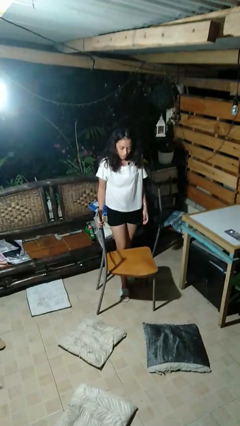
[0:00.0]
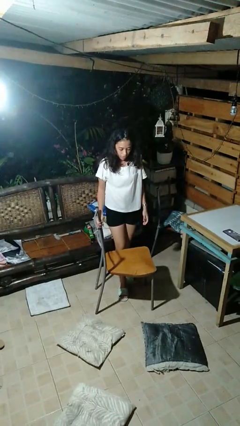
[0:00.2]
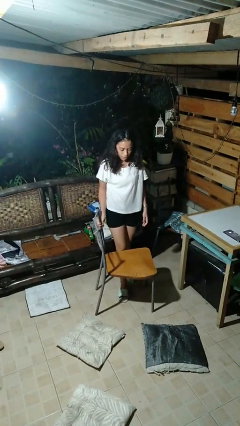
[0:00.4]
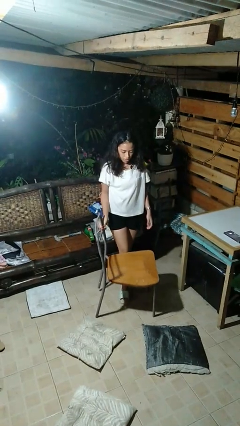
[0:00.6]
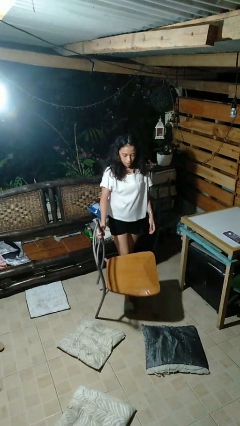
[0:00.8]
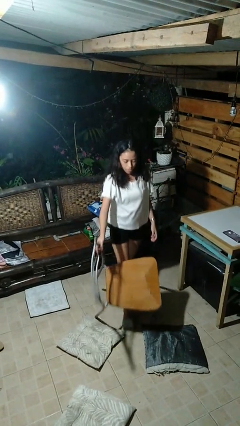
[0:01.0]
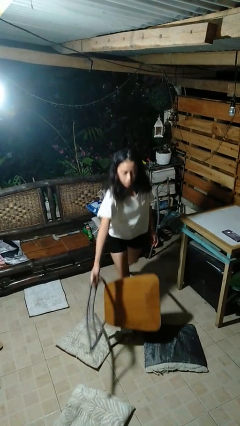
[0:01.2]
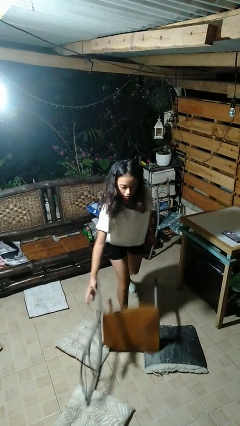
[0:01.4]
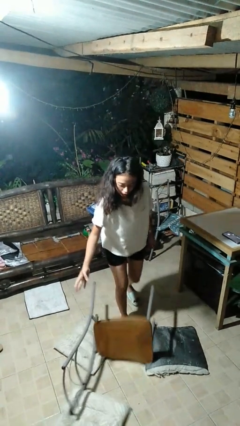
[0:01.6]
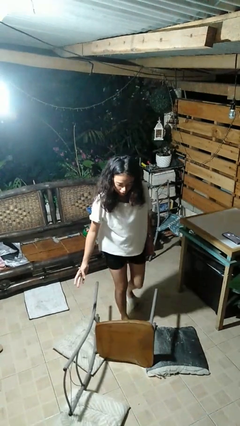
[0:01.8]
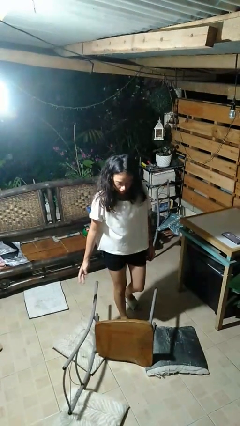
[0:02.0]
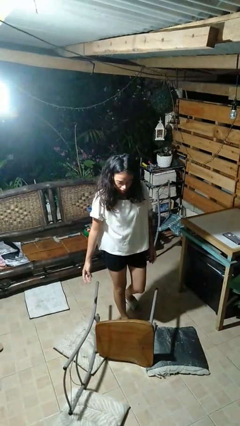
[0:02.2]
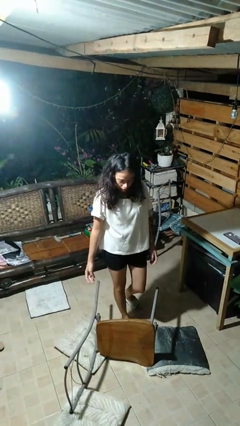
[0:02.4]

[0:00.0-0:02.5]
person knocks over furniture

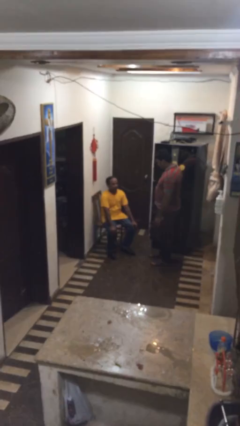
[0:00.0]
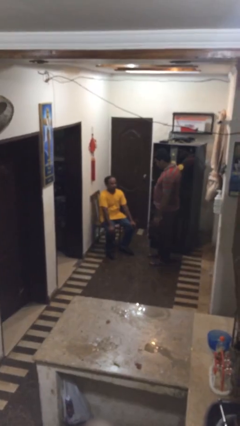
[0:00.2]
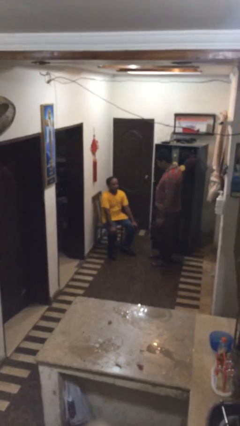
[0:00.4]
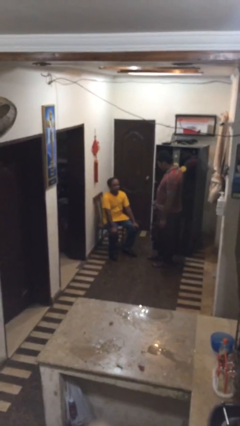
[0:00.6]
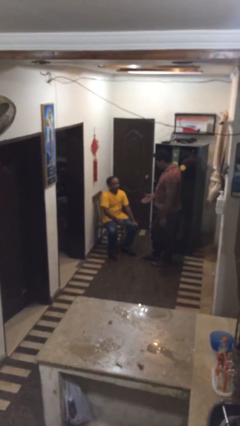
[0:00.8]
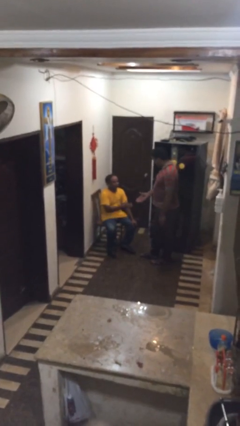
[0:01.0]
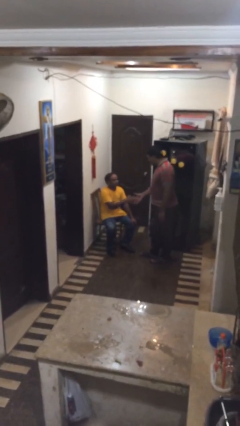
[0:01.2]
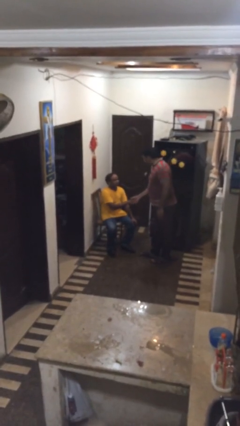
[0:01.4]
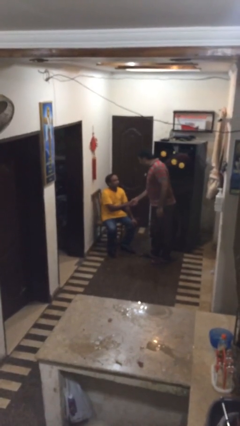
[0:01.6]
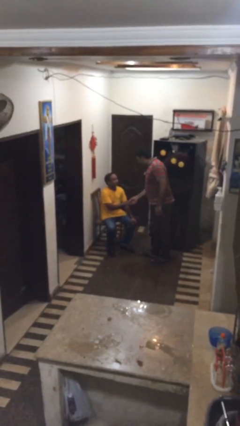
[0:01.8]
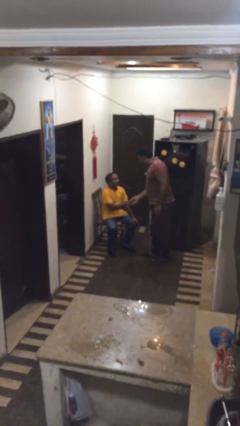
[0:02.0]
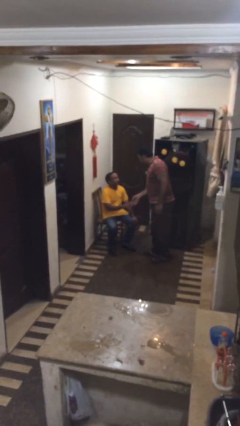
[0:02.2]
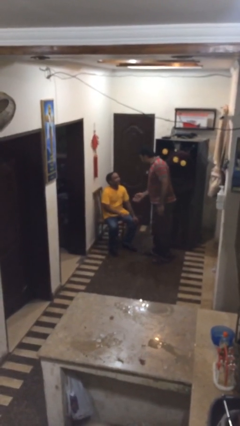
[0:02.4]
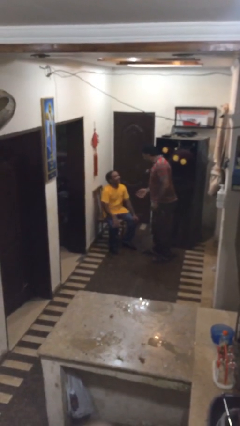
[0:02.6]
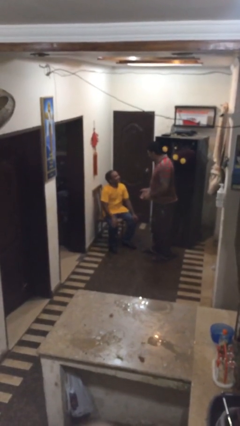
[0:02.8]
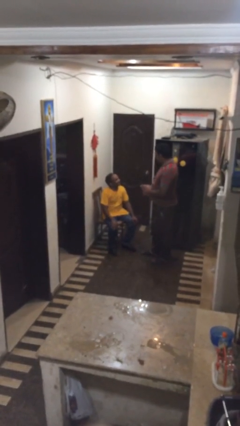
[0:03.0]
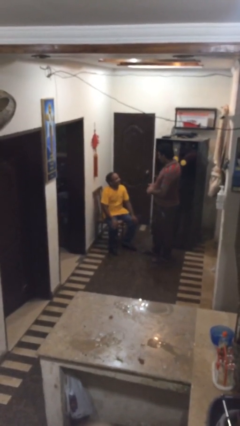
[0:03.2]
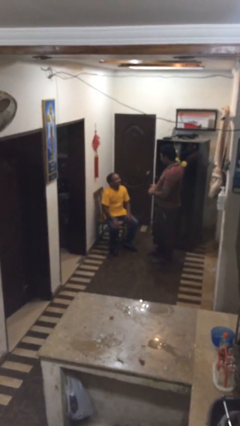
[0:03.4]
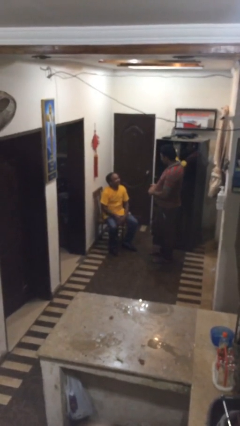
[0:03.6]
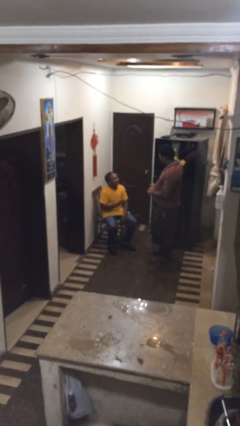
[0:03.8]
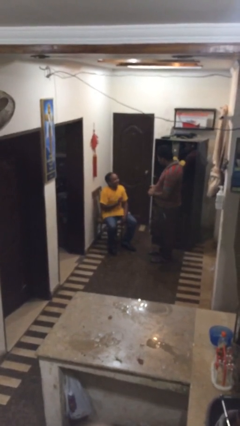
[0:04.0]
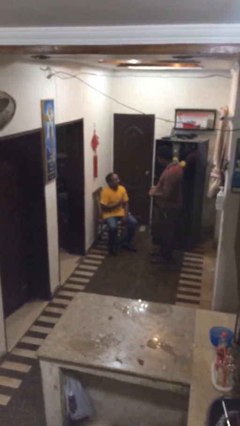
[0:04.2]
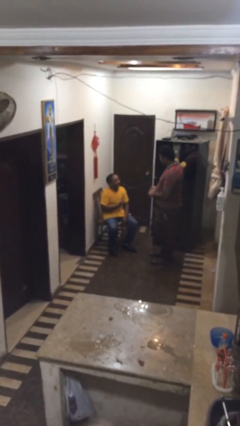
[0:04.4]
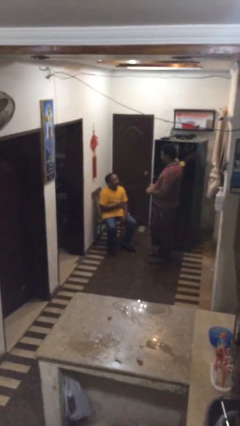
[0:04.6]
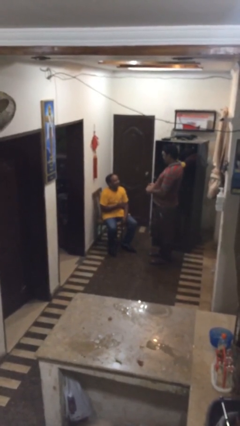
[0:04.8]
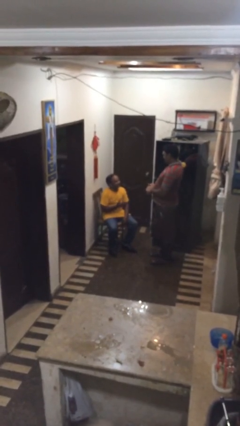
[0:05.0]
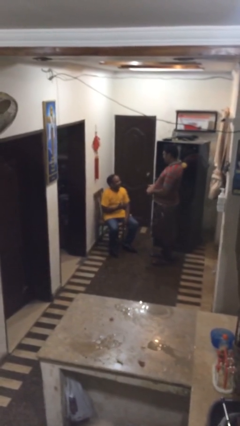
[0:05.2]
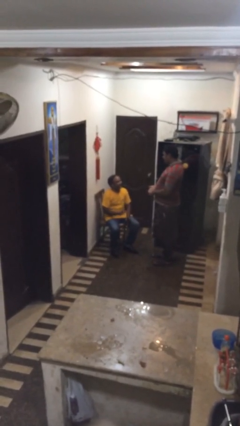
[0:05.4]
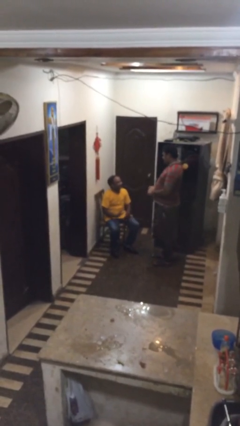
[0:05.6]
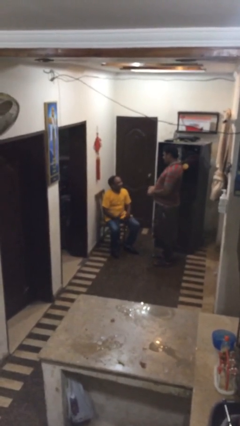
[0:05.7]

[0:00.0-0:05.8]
person shakes hand

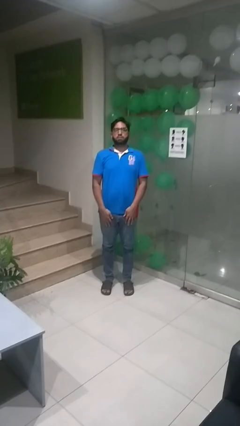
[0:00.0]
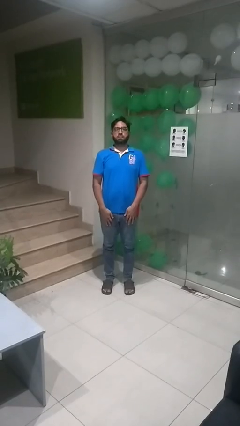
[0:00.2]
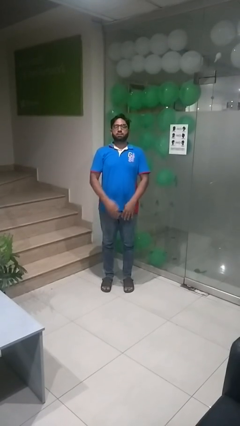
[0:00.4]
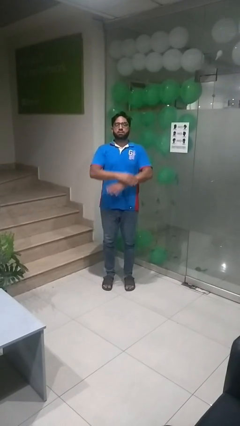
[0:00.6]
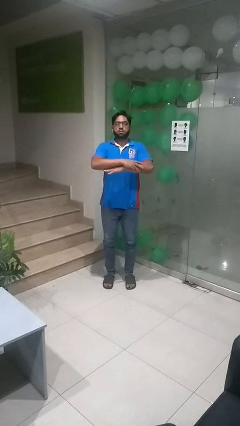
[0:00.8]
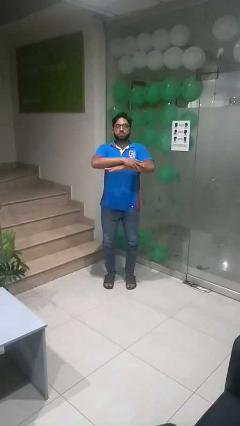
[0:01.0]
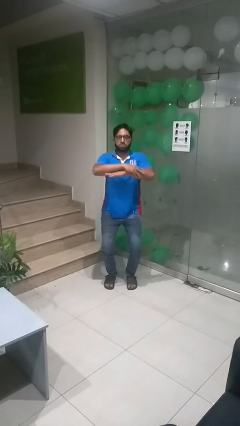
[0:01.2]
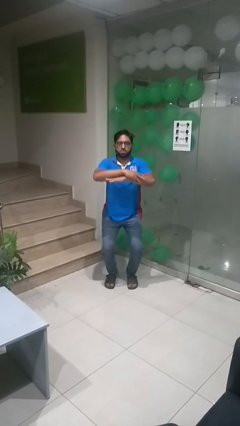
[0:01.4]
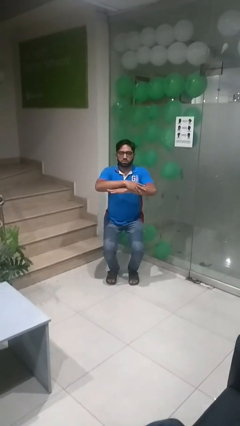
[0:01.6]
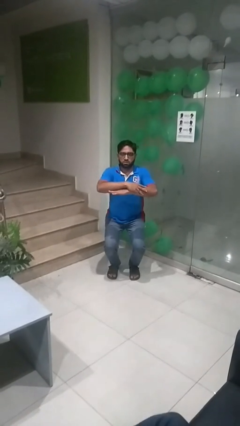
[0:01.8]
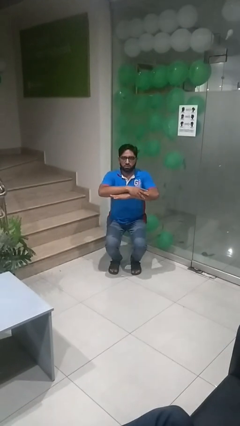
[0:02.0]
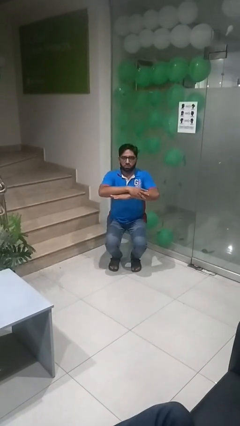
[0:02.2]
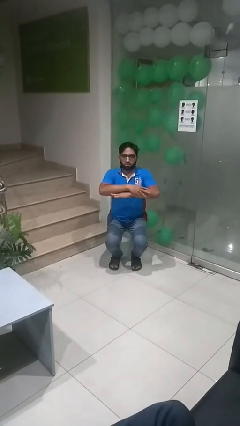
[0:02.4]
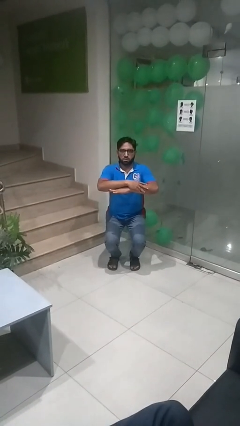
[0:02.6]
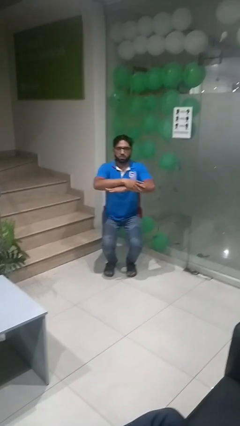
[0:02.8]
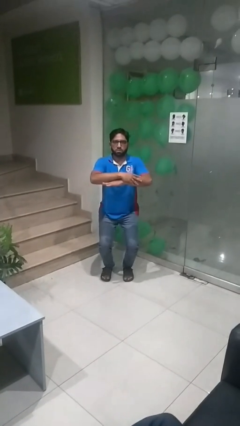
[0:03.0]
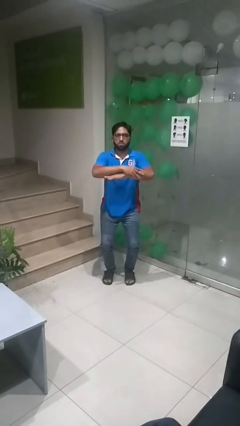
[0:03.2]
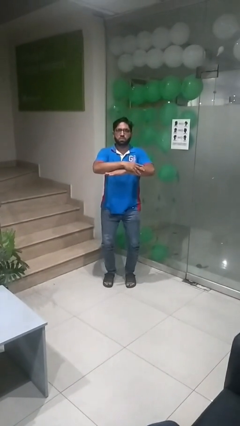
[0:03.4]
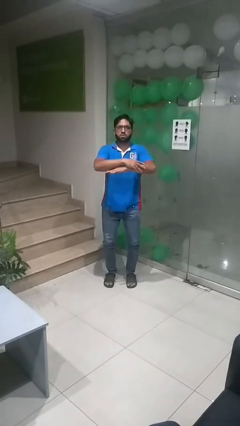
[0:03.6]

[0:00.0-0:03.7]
person squats

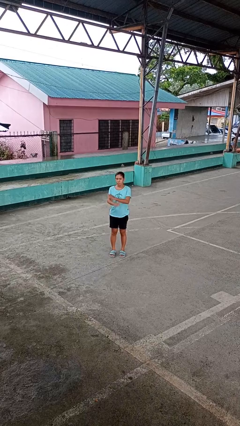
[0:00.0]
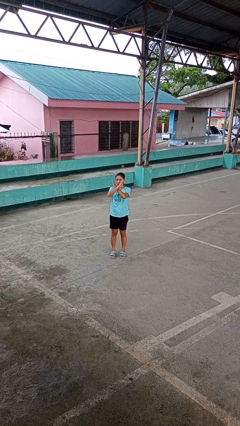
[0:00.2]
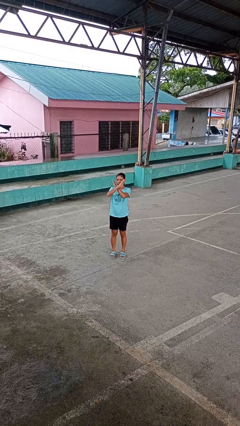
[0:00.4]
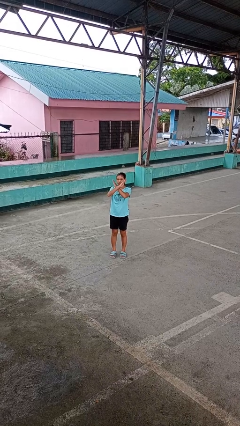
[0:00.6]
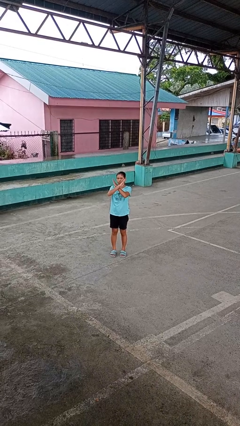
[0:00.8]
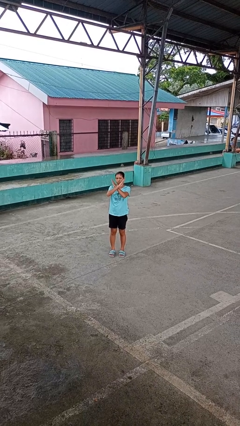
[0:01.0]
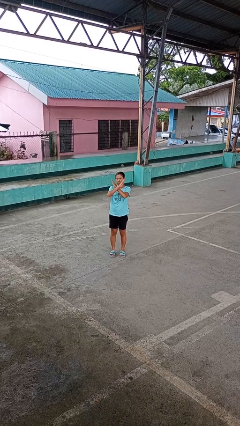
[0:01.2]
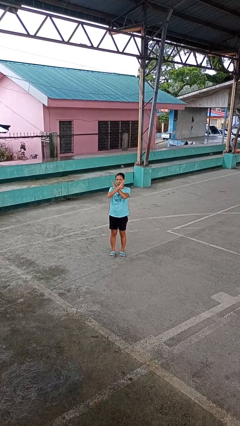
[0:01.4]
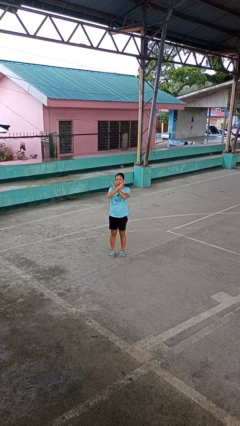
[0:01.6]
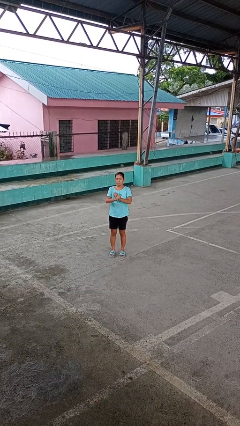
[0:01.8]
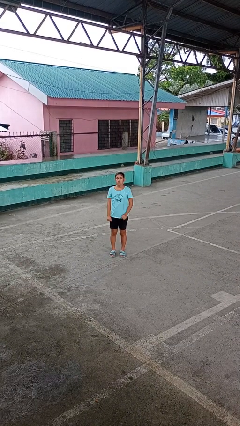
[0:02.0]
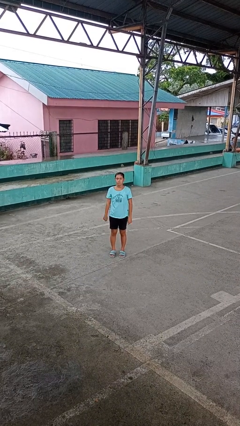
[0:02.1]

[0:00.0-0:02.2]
person gestures arms x

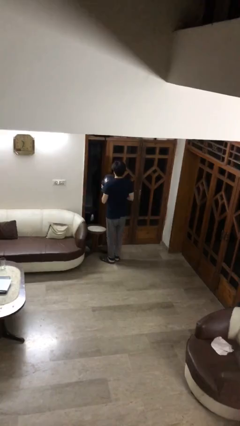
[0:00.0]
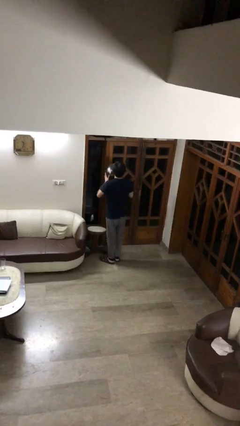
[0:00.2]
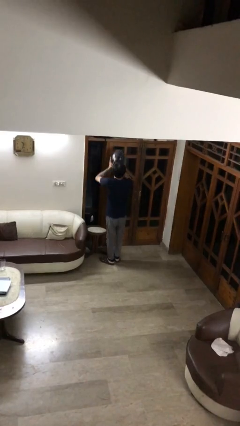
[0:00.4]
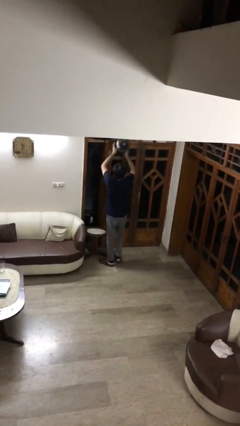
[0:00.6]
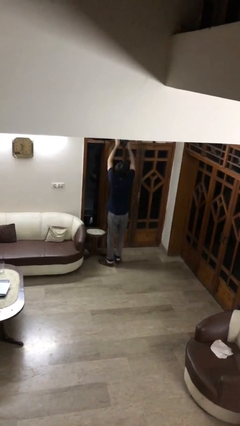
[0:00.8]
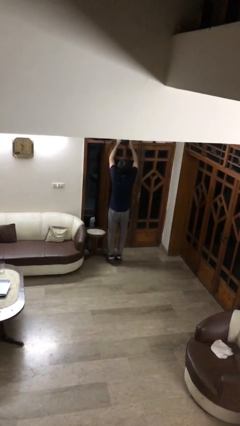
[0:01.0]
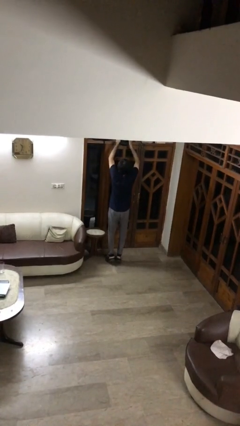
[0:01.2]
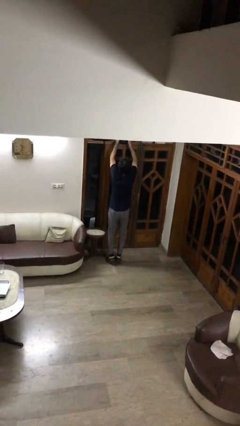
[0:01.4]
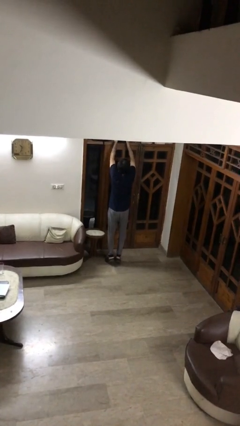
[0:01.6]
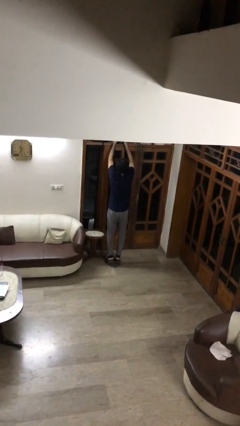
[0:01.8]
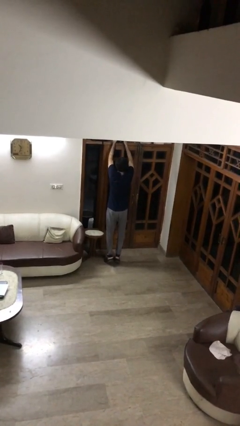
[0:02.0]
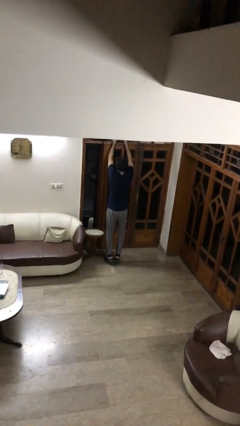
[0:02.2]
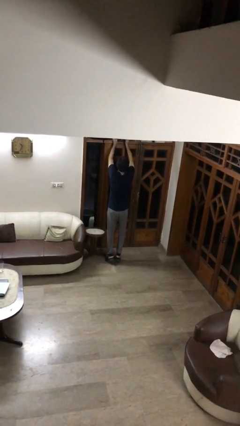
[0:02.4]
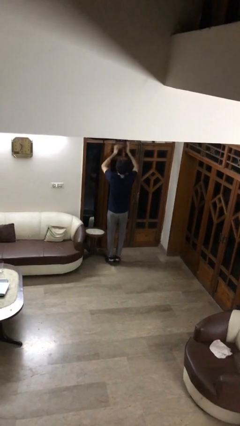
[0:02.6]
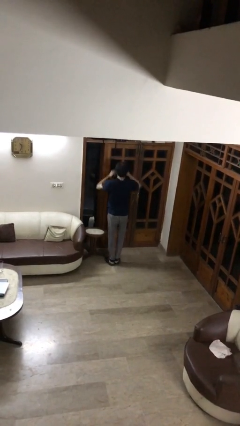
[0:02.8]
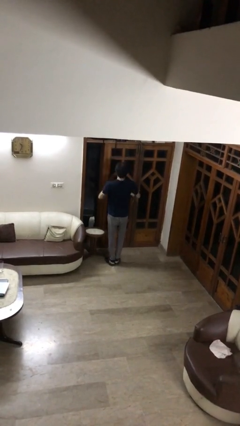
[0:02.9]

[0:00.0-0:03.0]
person puts down object on shelf

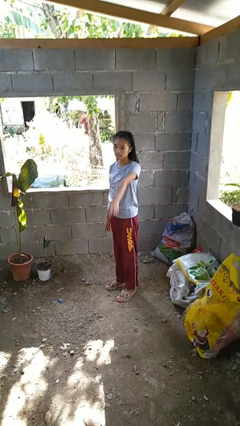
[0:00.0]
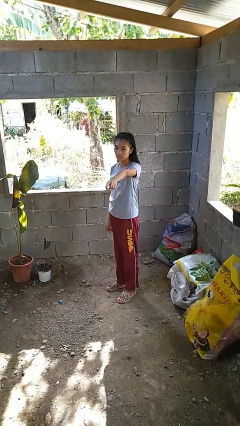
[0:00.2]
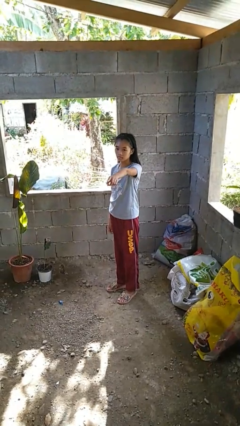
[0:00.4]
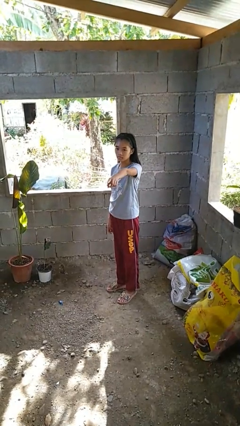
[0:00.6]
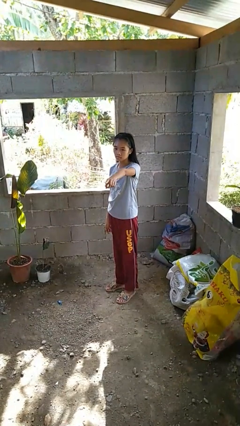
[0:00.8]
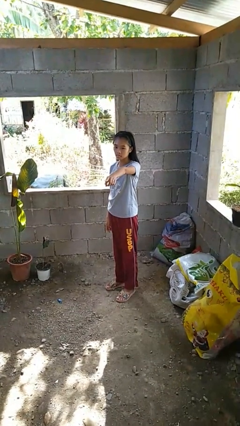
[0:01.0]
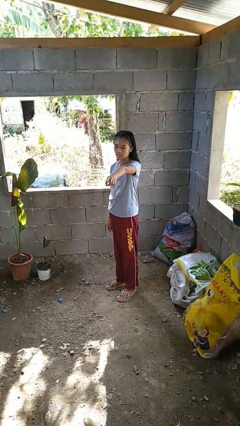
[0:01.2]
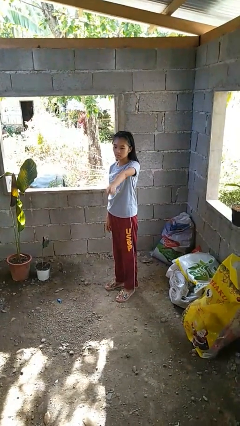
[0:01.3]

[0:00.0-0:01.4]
person points at person
